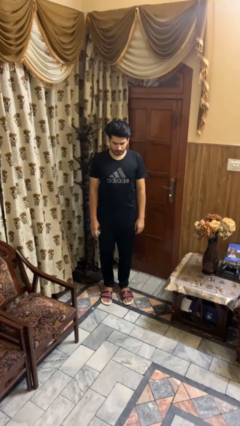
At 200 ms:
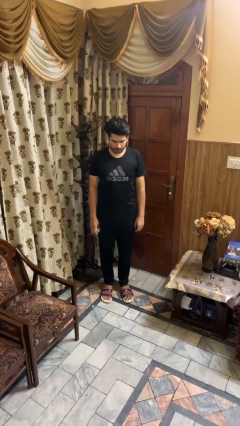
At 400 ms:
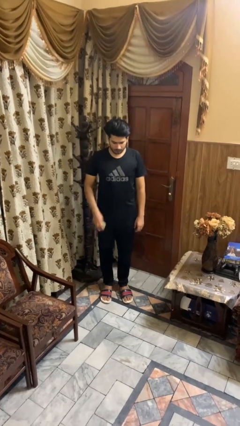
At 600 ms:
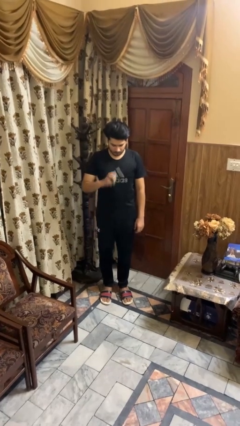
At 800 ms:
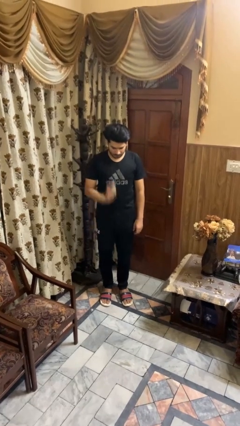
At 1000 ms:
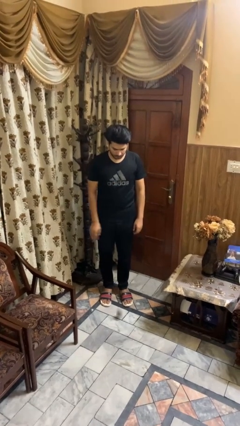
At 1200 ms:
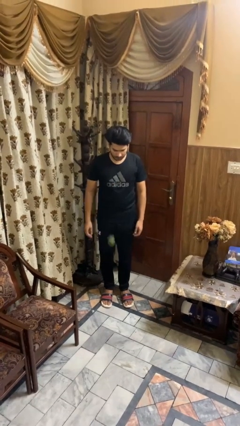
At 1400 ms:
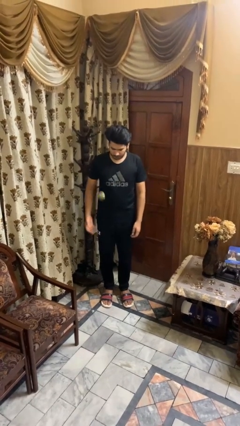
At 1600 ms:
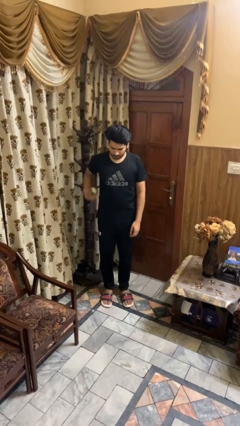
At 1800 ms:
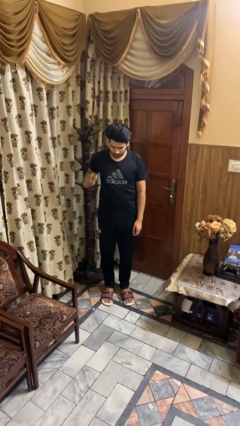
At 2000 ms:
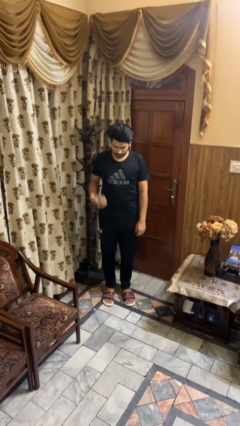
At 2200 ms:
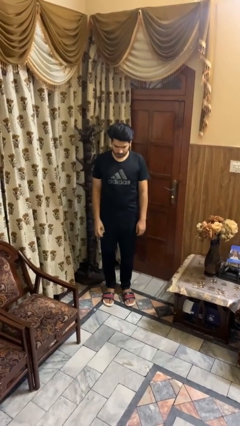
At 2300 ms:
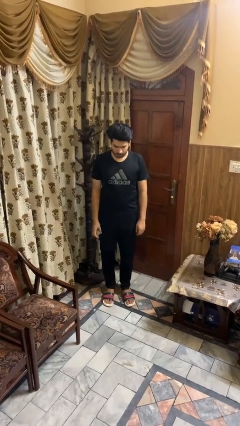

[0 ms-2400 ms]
person bounces ball on floor

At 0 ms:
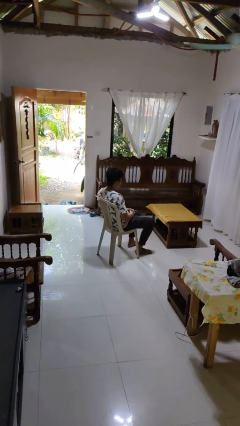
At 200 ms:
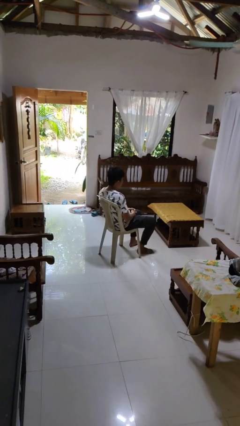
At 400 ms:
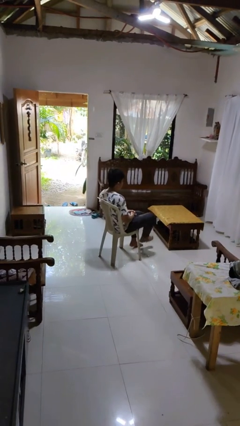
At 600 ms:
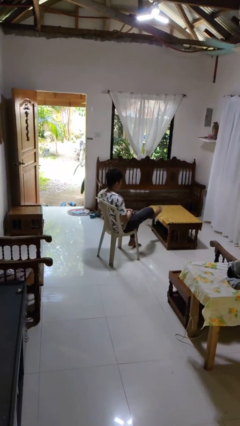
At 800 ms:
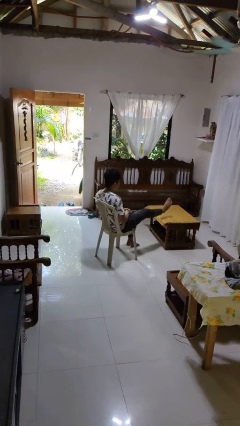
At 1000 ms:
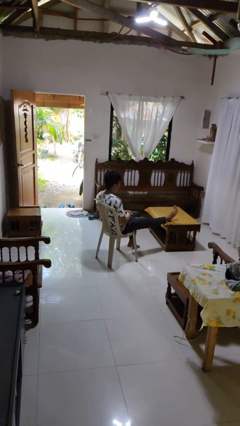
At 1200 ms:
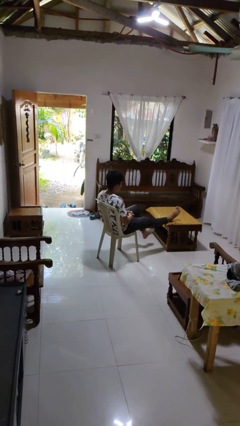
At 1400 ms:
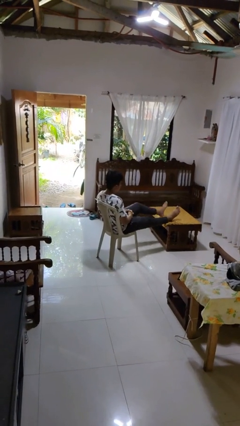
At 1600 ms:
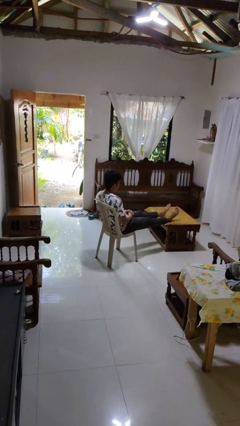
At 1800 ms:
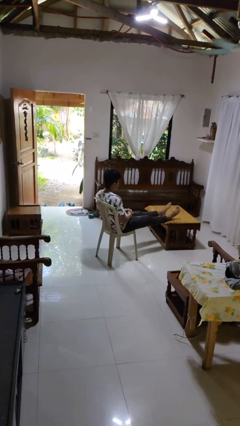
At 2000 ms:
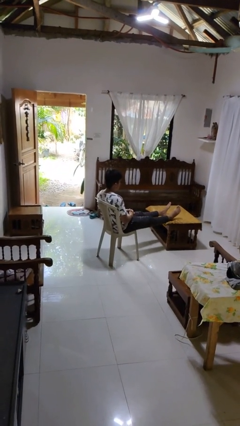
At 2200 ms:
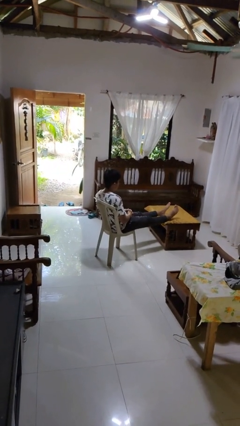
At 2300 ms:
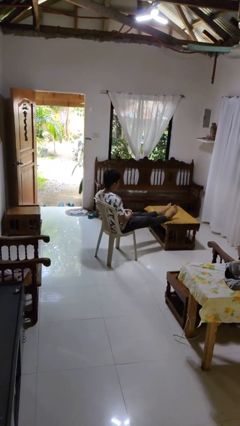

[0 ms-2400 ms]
person puts feet up

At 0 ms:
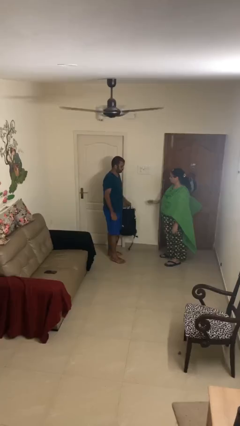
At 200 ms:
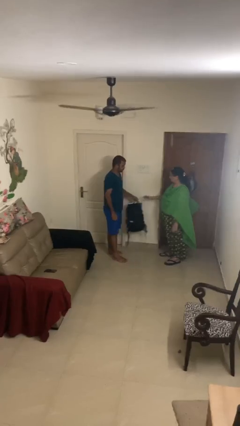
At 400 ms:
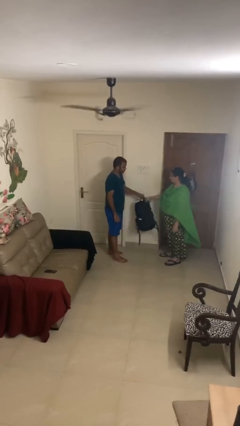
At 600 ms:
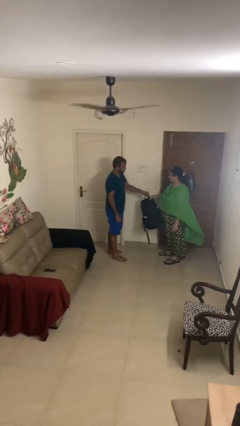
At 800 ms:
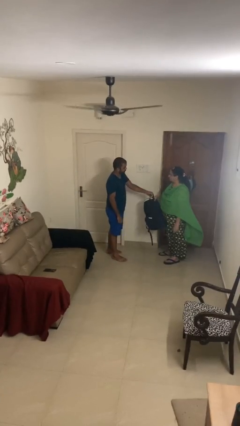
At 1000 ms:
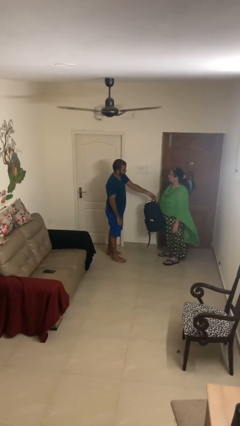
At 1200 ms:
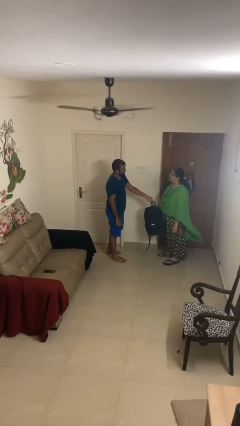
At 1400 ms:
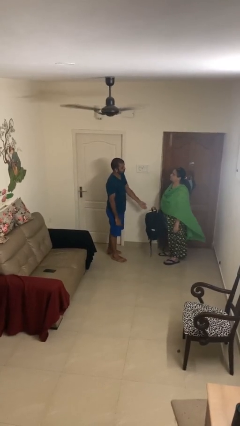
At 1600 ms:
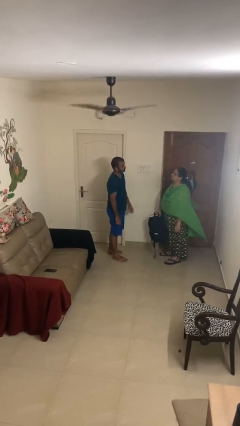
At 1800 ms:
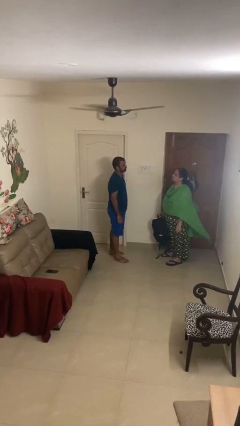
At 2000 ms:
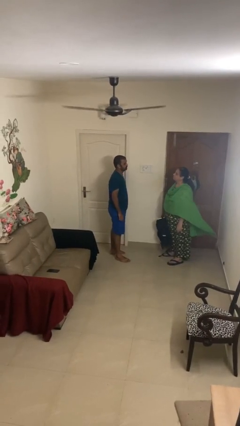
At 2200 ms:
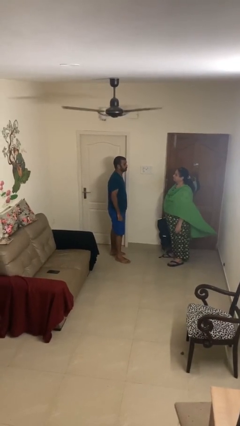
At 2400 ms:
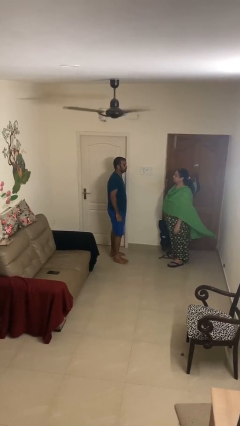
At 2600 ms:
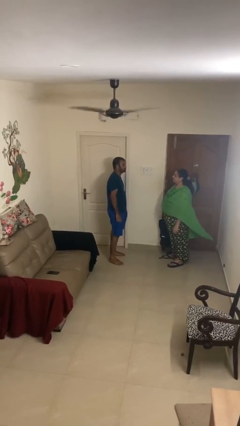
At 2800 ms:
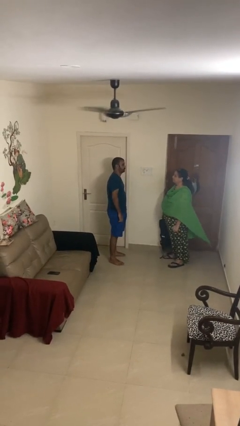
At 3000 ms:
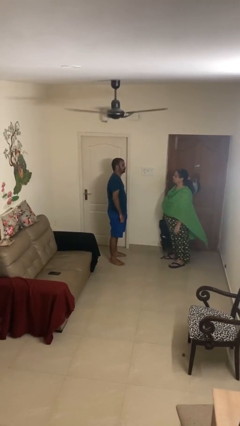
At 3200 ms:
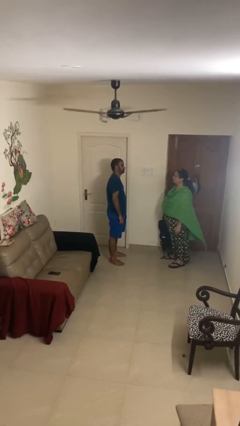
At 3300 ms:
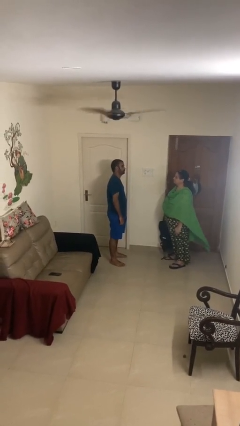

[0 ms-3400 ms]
person transfers object to person

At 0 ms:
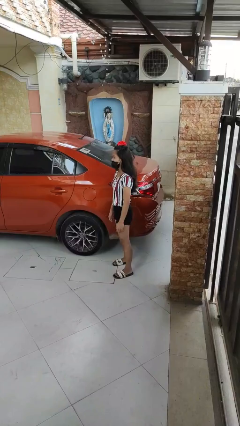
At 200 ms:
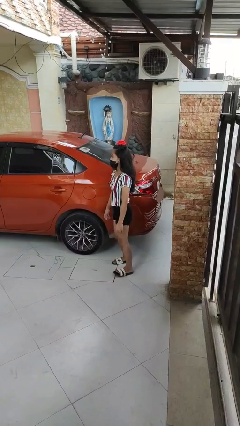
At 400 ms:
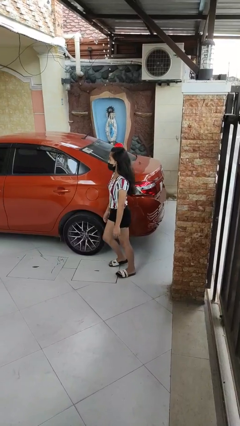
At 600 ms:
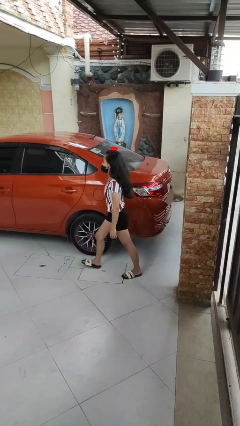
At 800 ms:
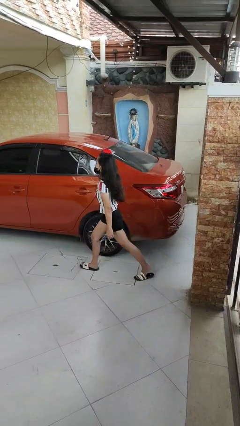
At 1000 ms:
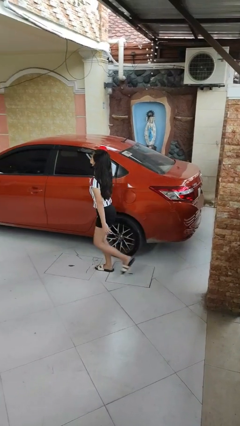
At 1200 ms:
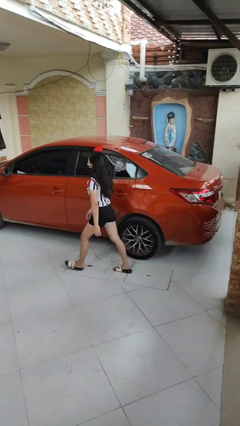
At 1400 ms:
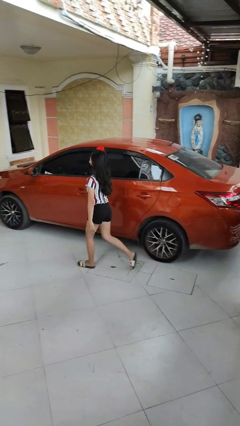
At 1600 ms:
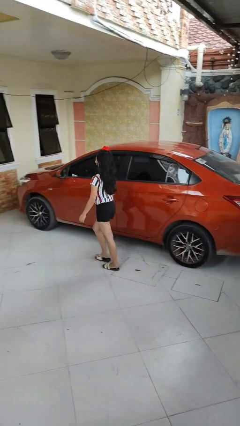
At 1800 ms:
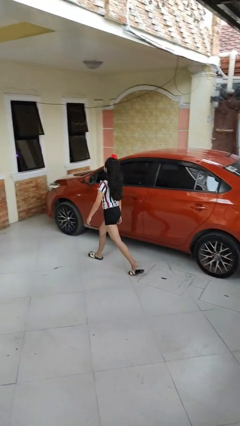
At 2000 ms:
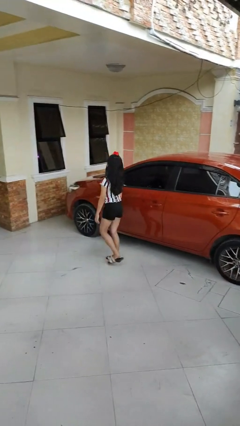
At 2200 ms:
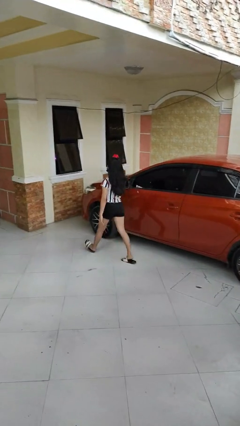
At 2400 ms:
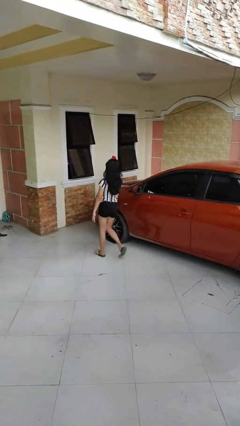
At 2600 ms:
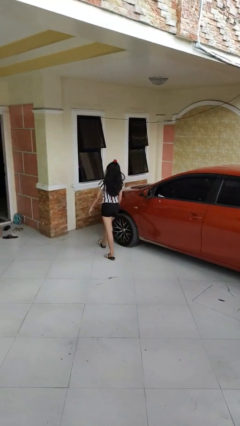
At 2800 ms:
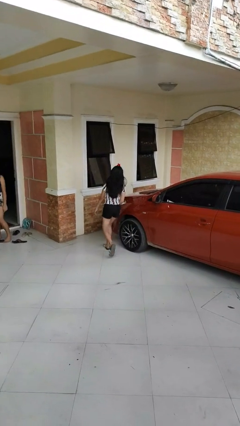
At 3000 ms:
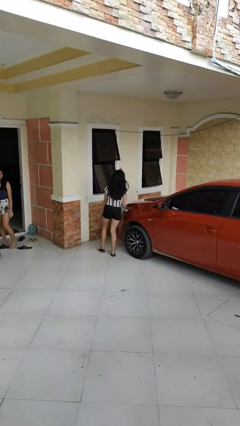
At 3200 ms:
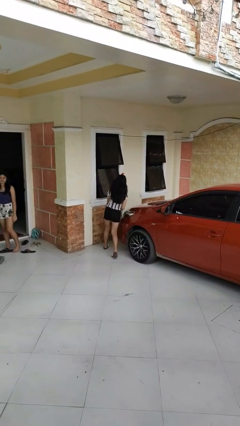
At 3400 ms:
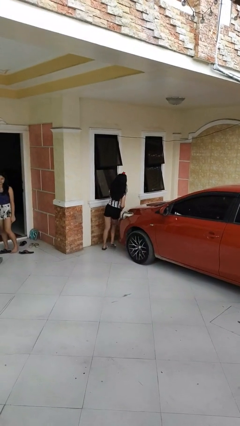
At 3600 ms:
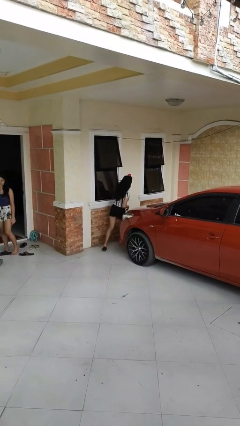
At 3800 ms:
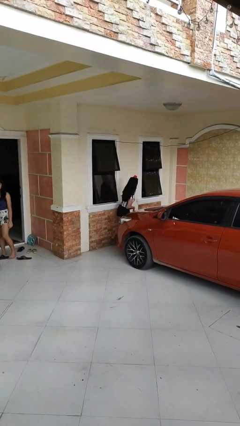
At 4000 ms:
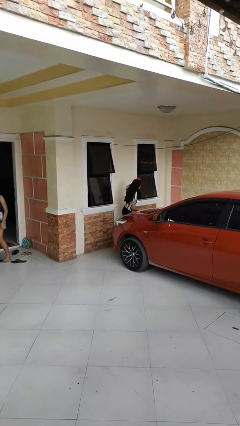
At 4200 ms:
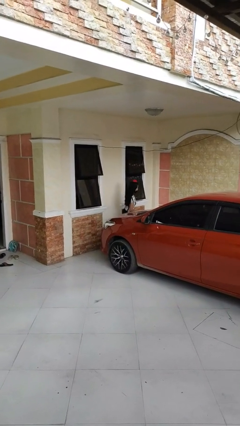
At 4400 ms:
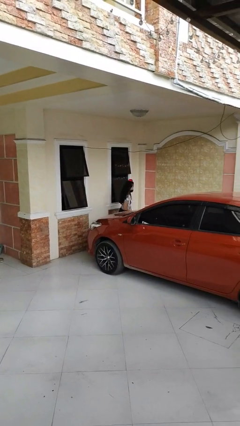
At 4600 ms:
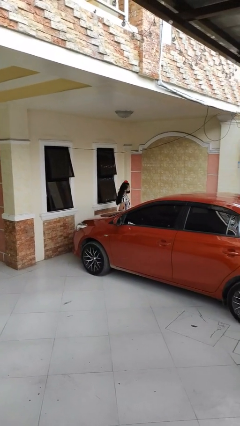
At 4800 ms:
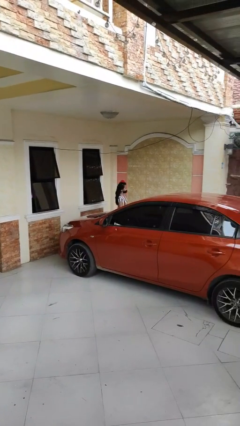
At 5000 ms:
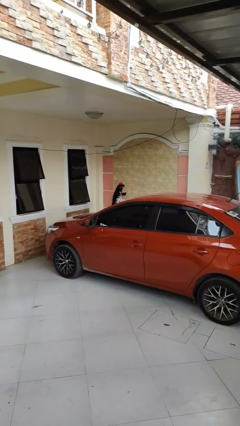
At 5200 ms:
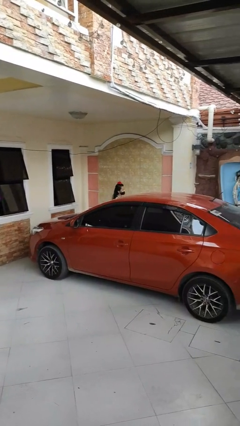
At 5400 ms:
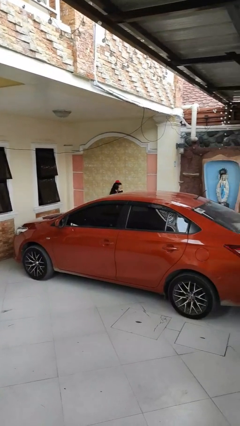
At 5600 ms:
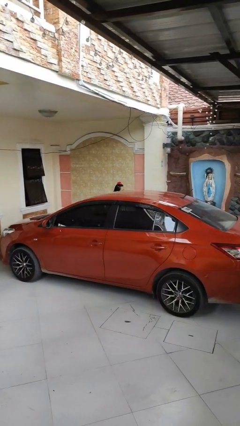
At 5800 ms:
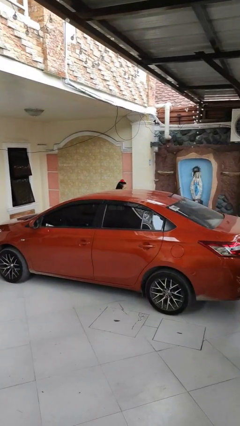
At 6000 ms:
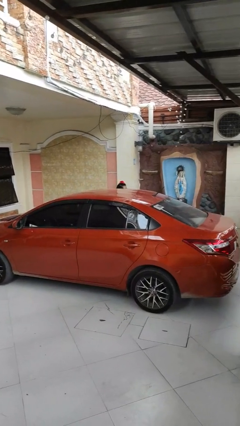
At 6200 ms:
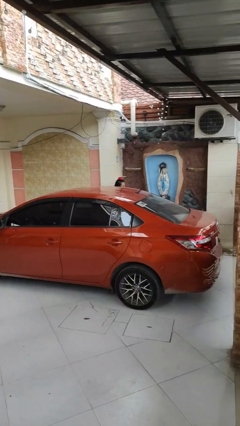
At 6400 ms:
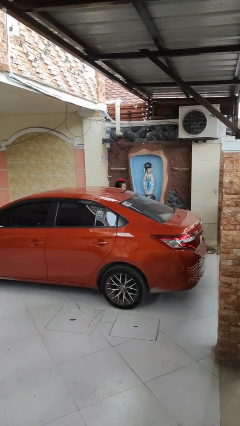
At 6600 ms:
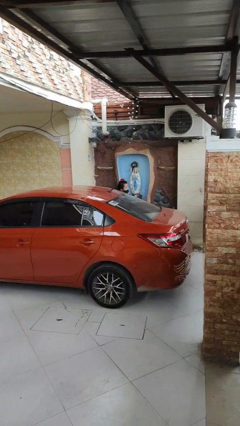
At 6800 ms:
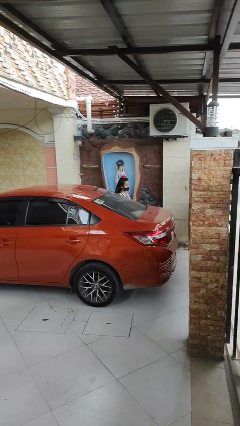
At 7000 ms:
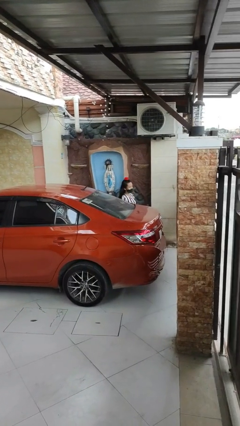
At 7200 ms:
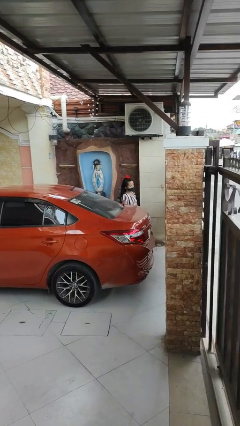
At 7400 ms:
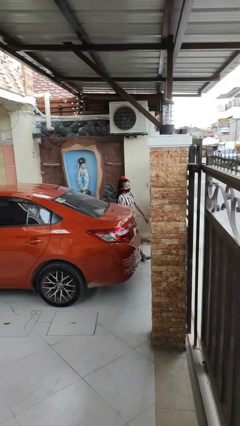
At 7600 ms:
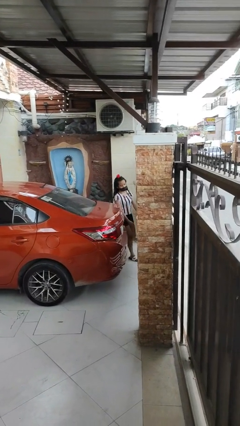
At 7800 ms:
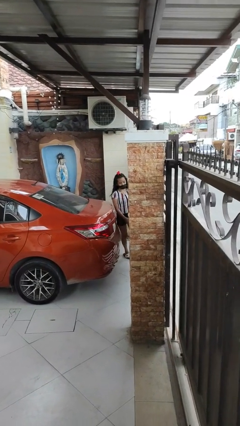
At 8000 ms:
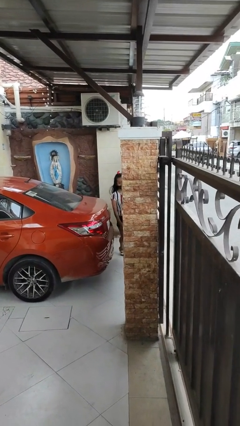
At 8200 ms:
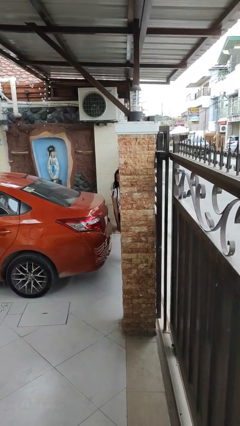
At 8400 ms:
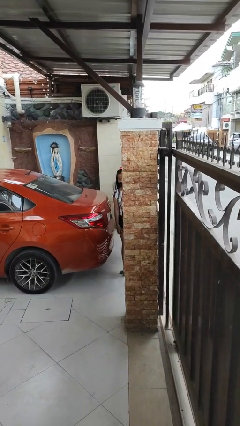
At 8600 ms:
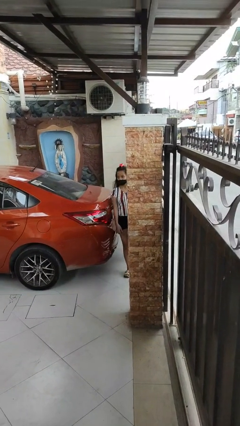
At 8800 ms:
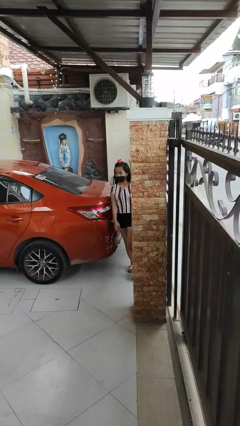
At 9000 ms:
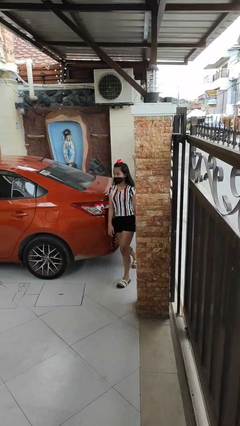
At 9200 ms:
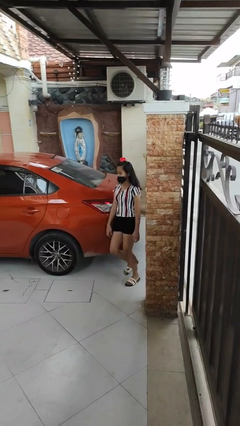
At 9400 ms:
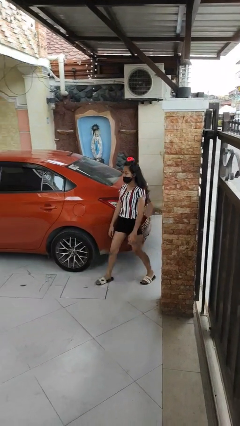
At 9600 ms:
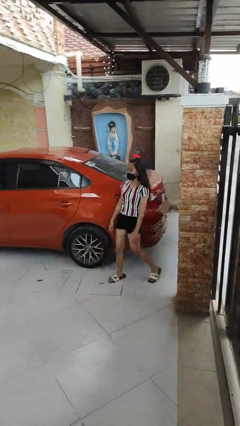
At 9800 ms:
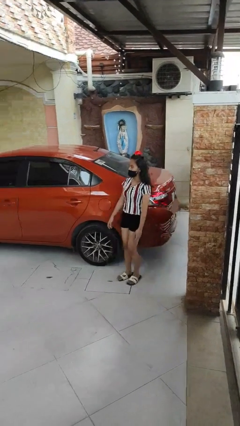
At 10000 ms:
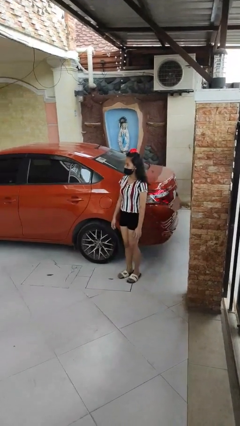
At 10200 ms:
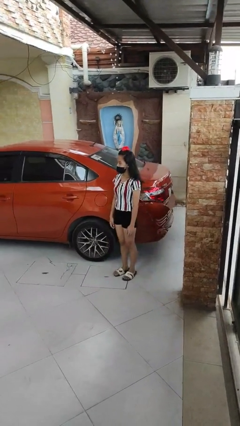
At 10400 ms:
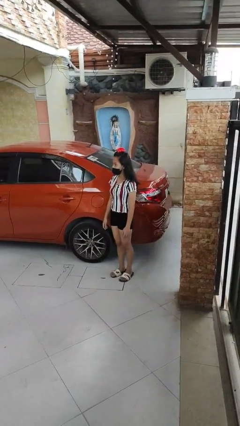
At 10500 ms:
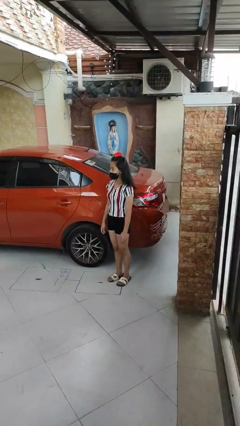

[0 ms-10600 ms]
person walks around car
